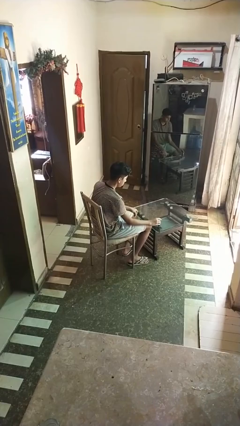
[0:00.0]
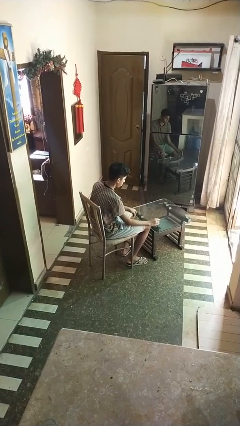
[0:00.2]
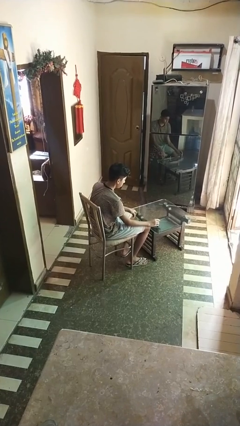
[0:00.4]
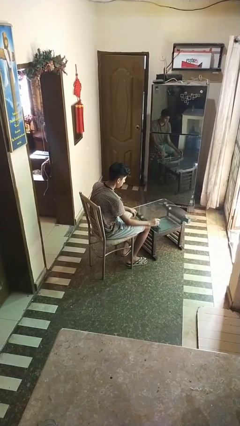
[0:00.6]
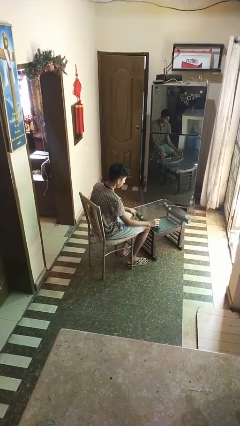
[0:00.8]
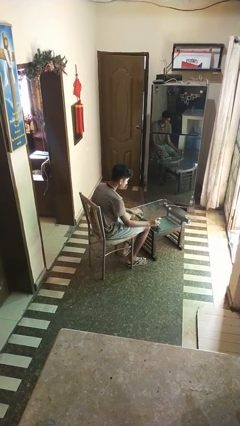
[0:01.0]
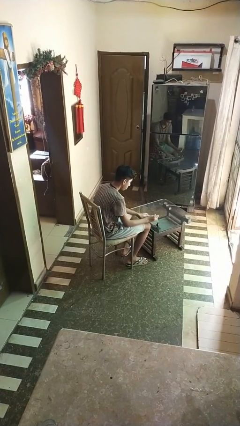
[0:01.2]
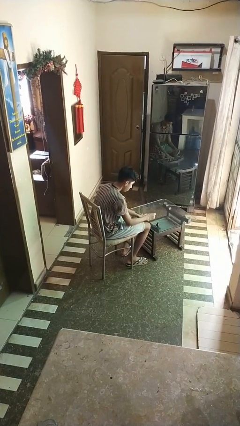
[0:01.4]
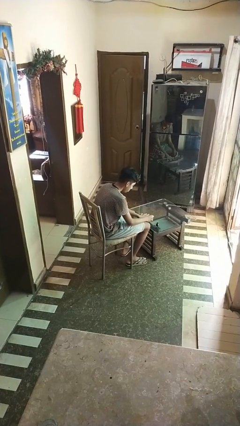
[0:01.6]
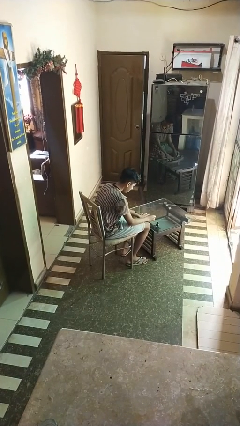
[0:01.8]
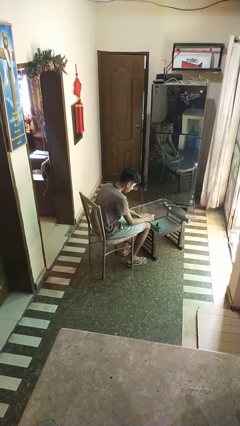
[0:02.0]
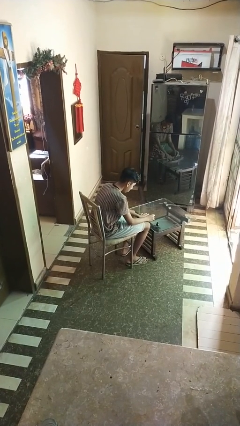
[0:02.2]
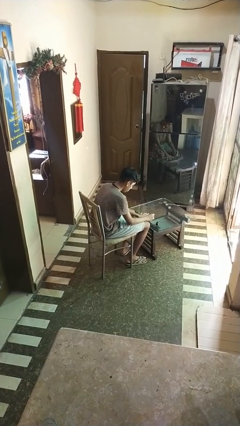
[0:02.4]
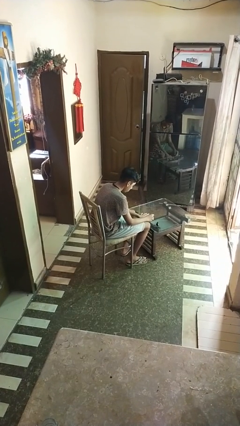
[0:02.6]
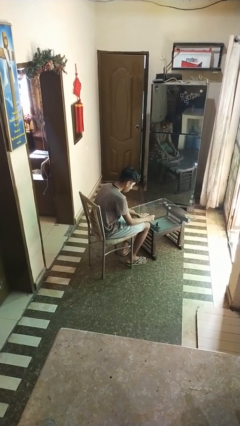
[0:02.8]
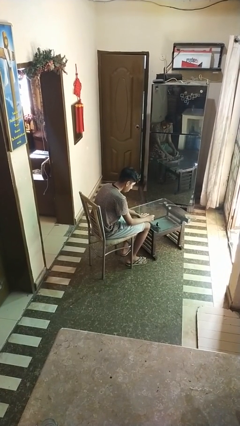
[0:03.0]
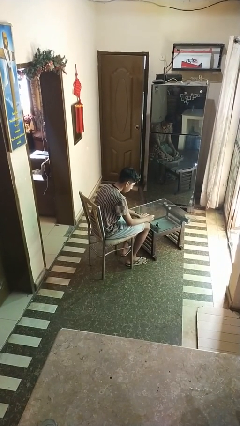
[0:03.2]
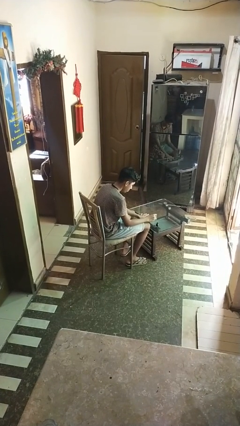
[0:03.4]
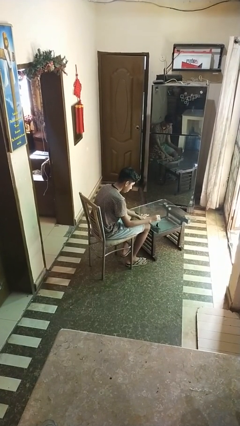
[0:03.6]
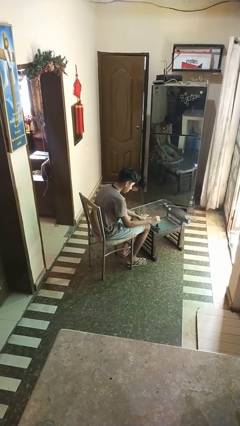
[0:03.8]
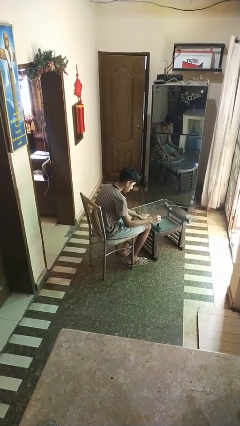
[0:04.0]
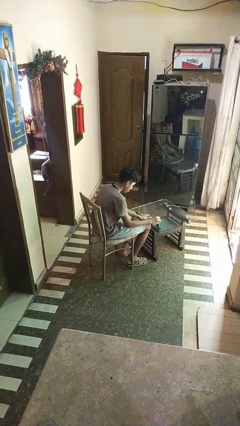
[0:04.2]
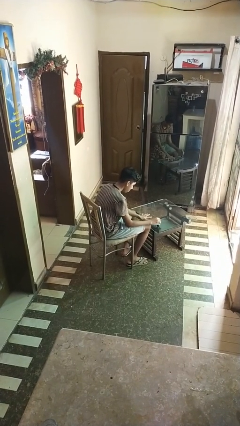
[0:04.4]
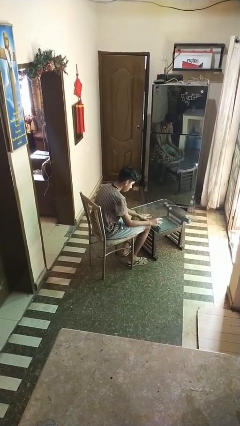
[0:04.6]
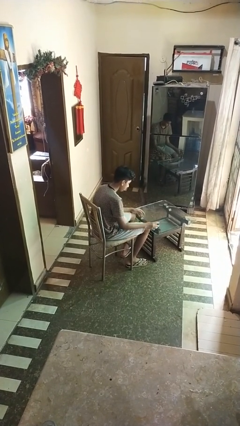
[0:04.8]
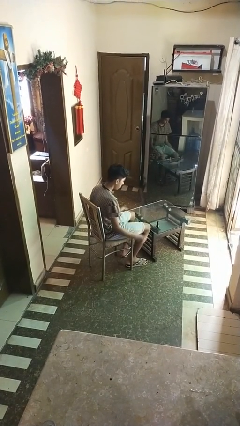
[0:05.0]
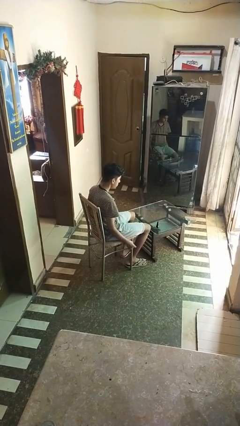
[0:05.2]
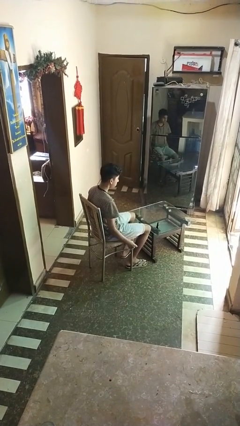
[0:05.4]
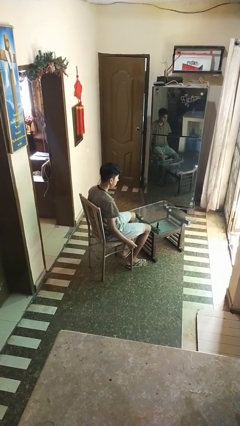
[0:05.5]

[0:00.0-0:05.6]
person paints fingernails

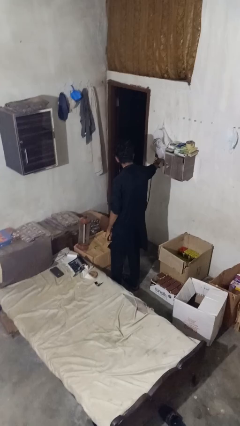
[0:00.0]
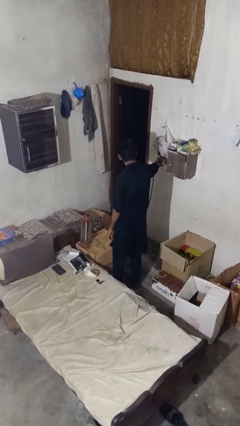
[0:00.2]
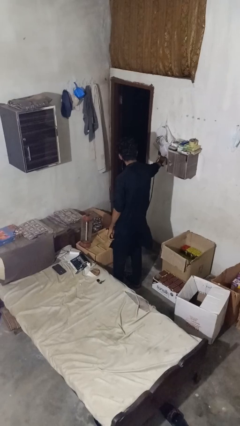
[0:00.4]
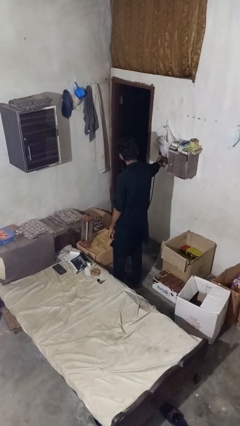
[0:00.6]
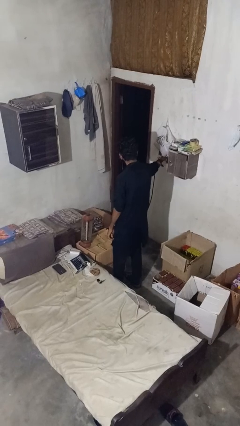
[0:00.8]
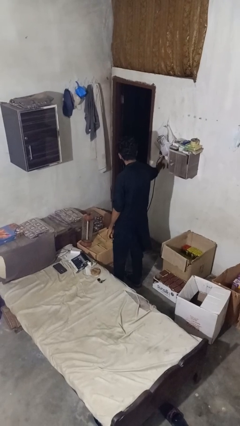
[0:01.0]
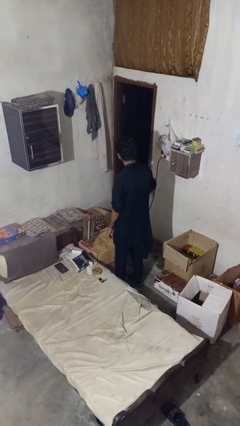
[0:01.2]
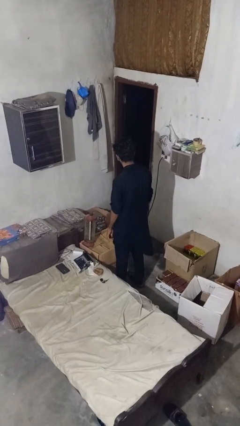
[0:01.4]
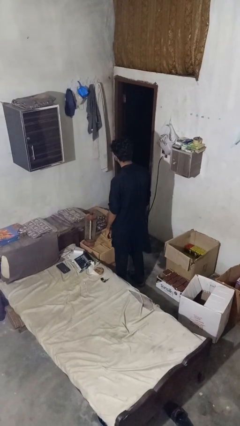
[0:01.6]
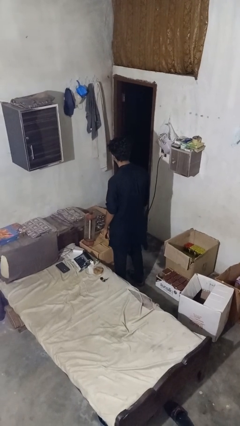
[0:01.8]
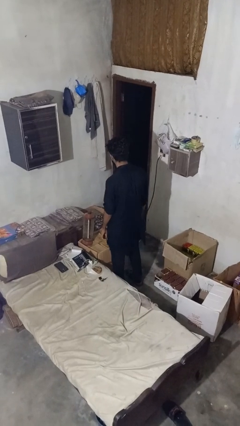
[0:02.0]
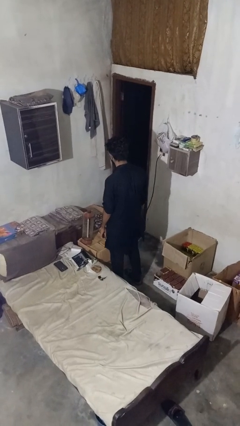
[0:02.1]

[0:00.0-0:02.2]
person turns off lamp

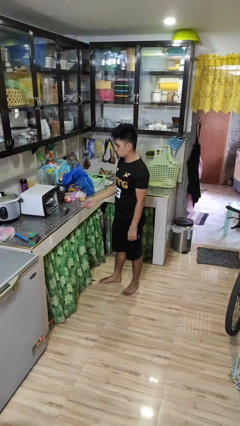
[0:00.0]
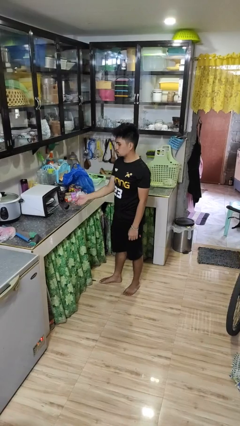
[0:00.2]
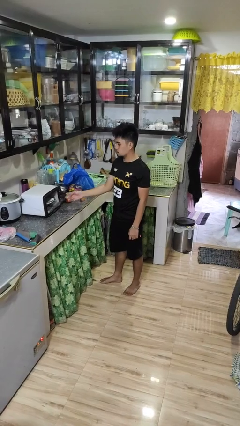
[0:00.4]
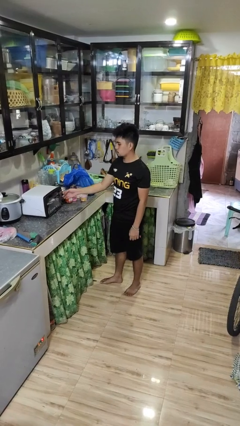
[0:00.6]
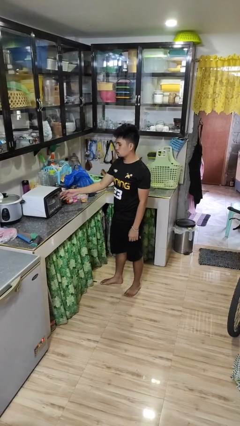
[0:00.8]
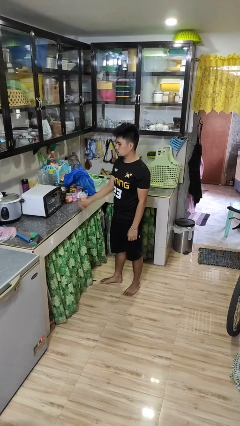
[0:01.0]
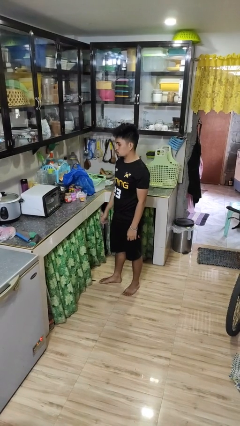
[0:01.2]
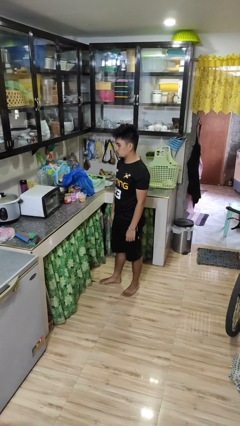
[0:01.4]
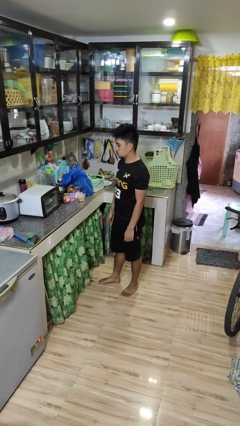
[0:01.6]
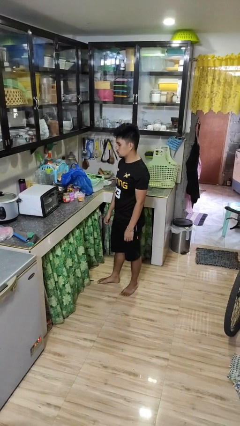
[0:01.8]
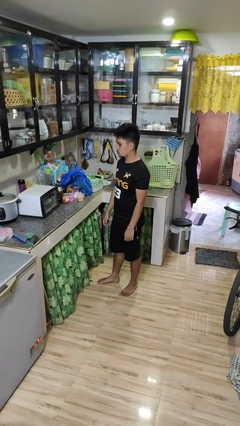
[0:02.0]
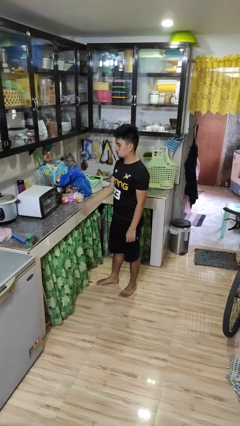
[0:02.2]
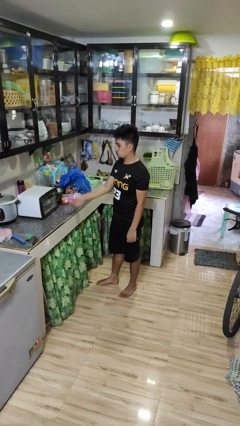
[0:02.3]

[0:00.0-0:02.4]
person closes microwave

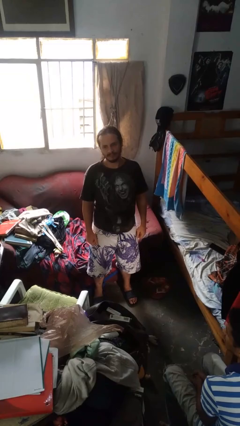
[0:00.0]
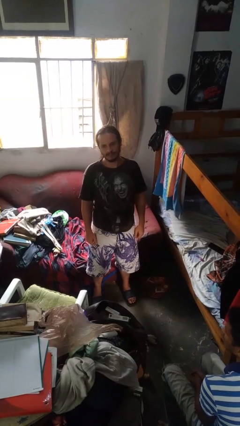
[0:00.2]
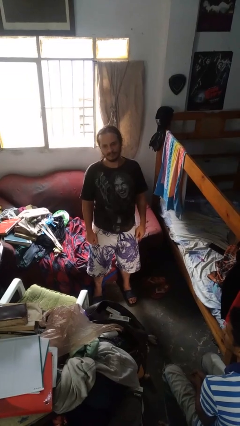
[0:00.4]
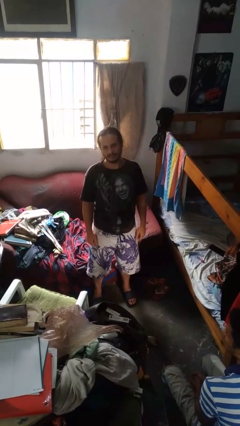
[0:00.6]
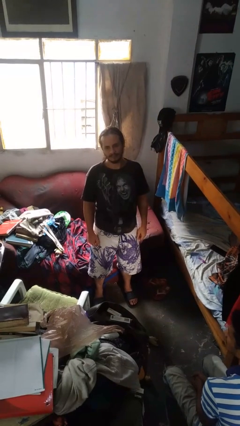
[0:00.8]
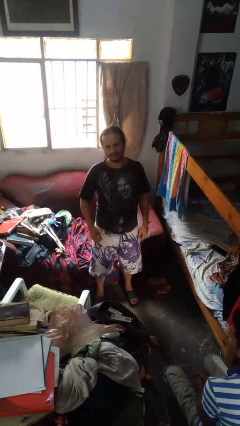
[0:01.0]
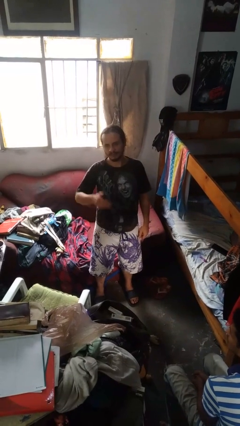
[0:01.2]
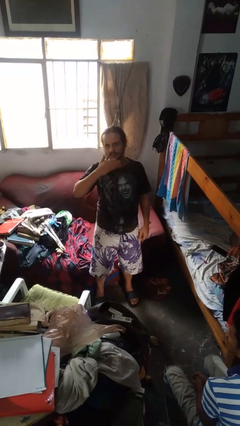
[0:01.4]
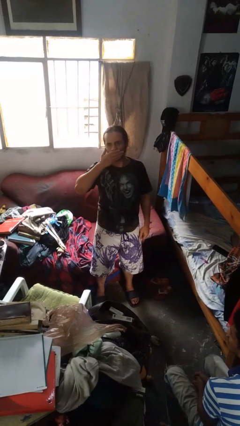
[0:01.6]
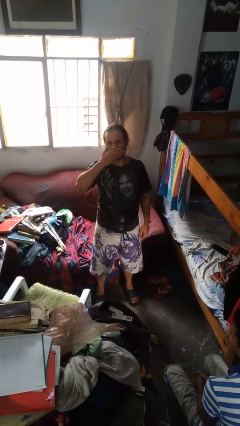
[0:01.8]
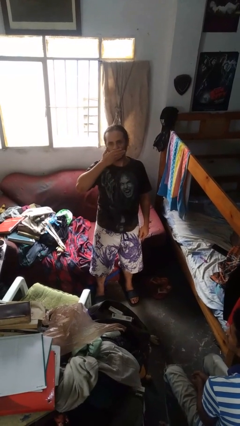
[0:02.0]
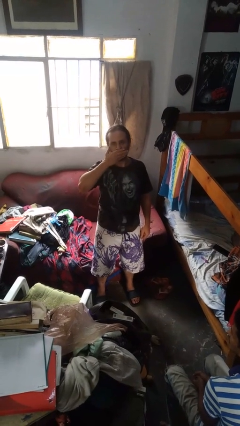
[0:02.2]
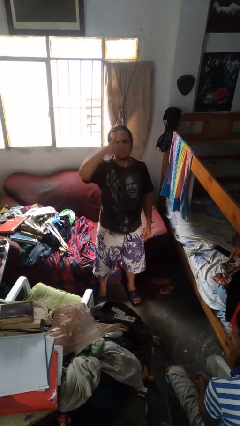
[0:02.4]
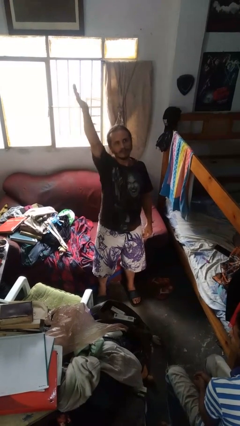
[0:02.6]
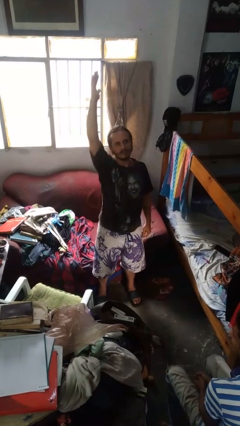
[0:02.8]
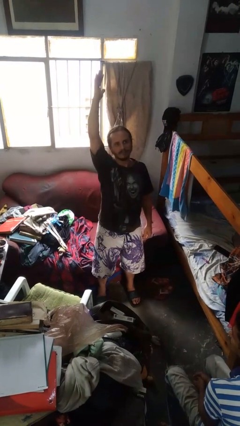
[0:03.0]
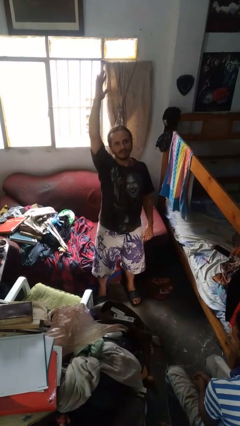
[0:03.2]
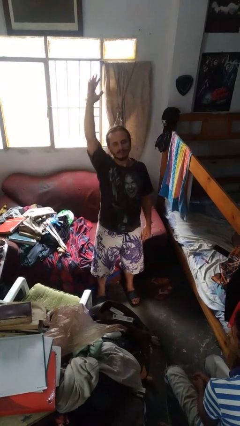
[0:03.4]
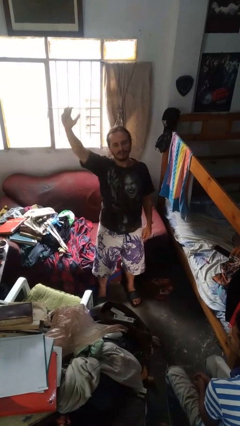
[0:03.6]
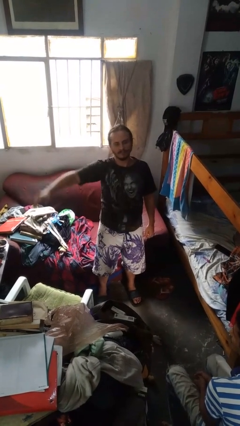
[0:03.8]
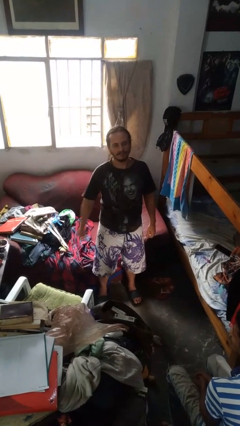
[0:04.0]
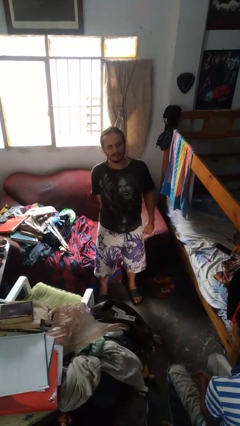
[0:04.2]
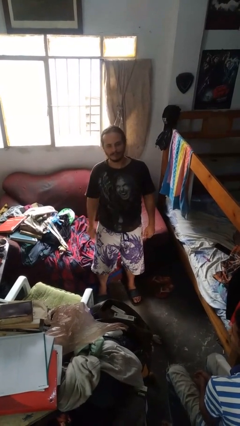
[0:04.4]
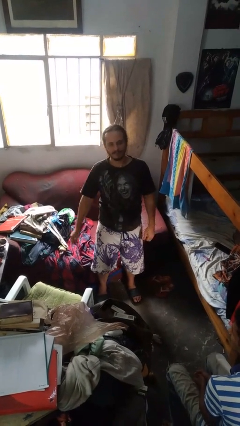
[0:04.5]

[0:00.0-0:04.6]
person gestures blow kiss

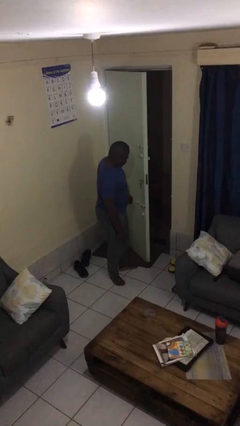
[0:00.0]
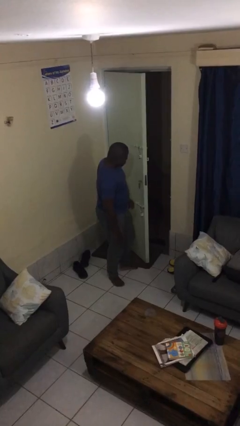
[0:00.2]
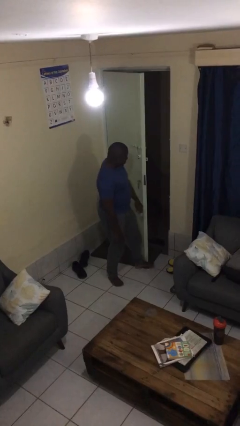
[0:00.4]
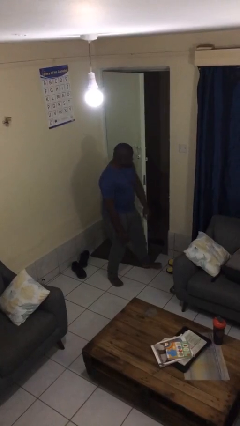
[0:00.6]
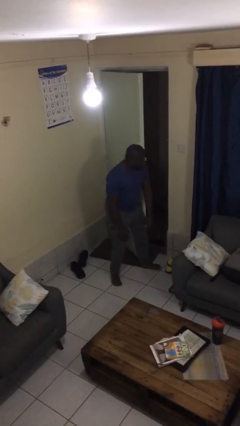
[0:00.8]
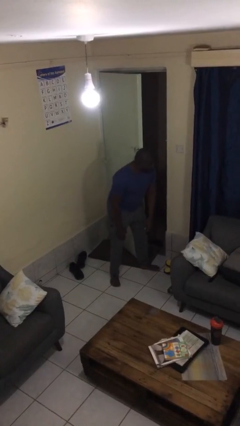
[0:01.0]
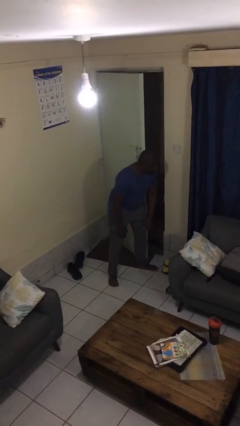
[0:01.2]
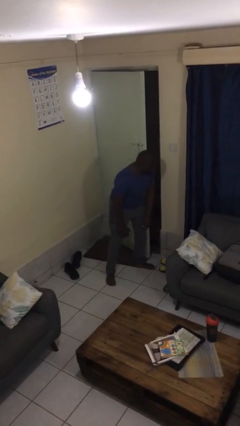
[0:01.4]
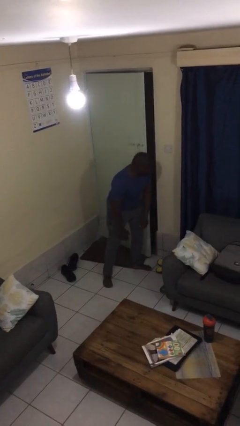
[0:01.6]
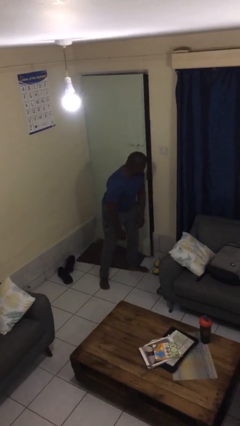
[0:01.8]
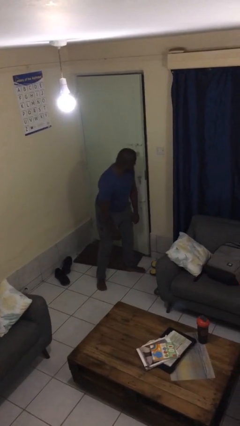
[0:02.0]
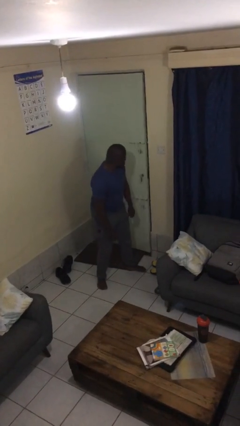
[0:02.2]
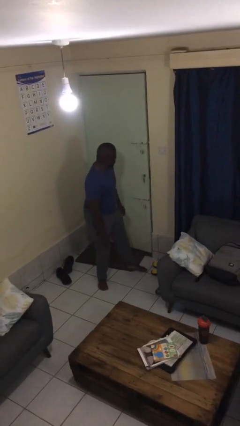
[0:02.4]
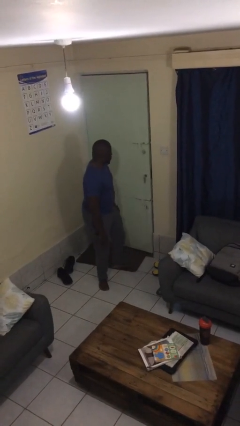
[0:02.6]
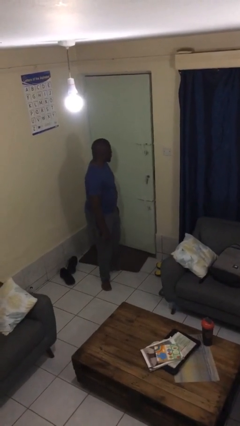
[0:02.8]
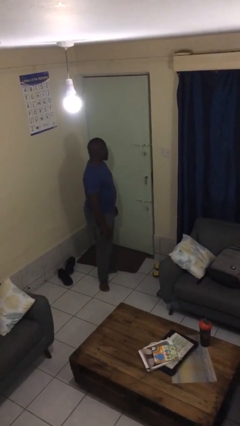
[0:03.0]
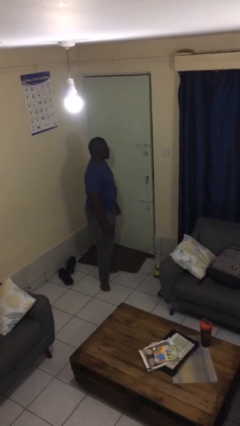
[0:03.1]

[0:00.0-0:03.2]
person closes door with hip
